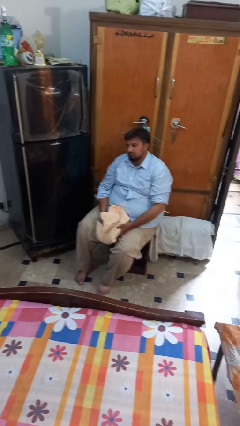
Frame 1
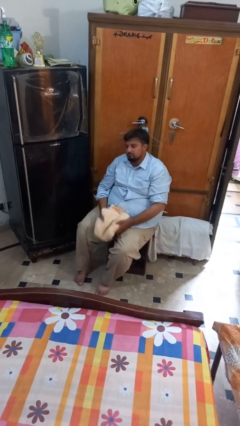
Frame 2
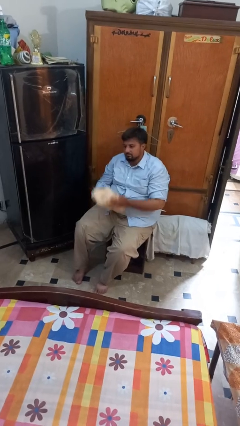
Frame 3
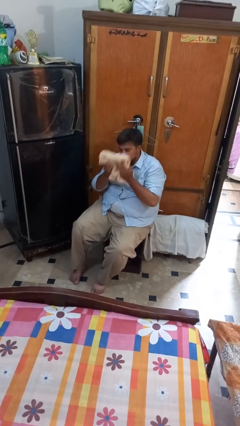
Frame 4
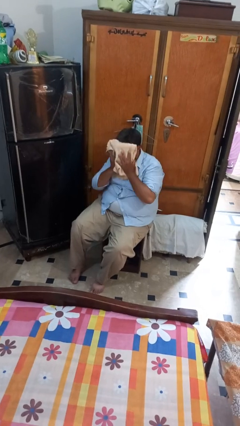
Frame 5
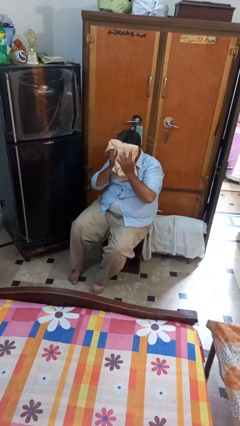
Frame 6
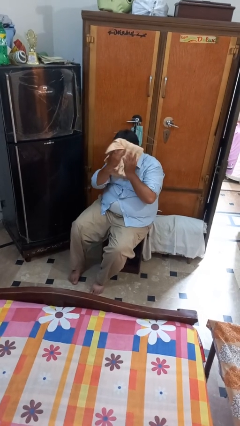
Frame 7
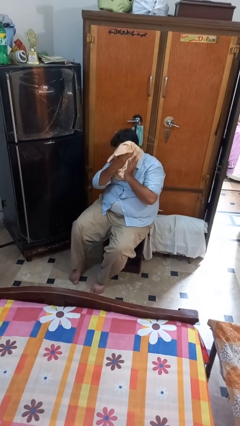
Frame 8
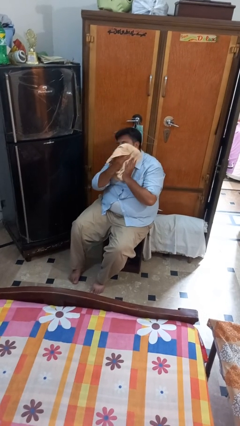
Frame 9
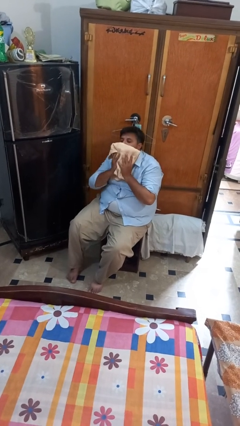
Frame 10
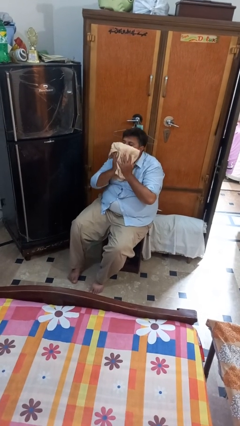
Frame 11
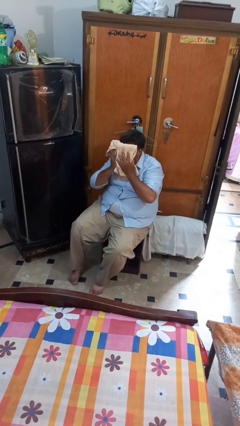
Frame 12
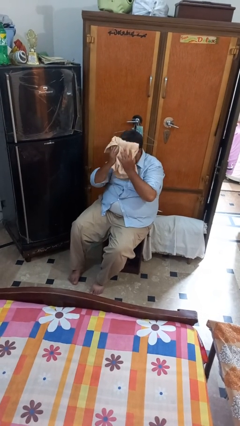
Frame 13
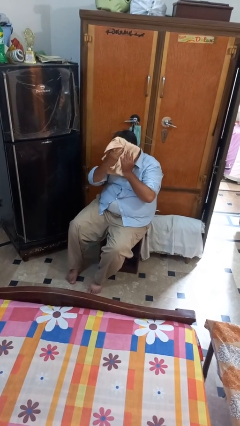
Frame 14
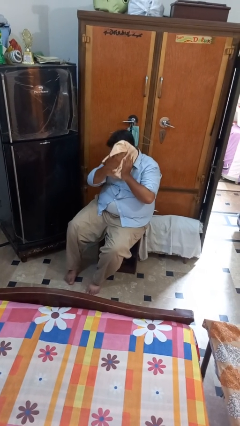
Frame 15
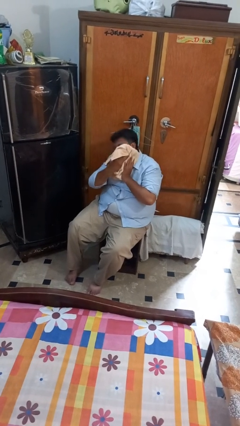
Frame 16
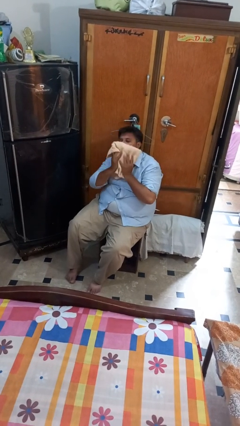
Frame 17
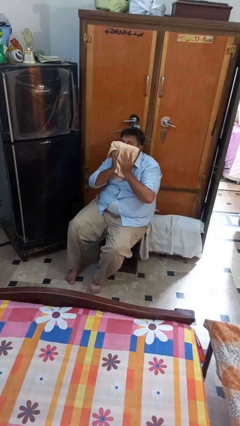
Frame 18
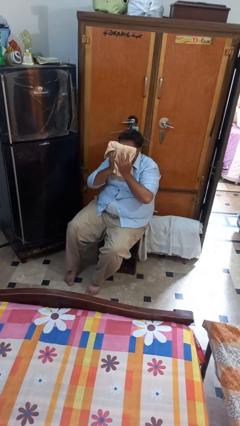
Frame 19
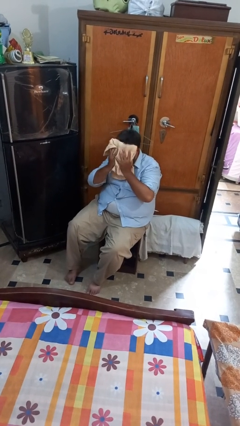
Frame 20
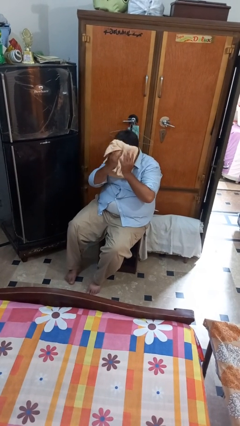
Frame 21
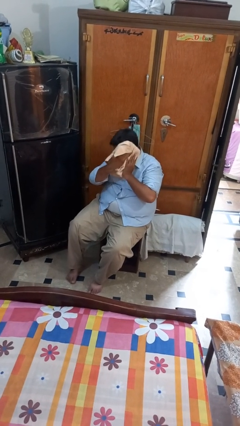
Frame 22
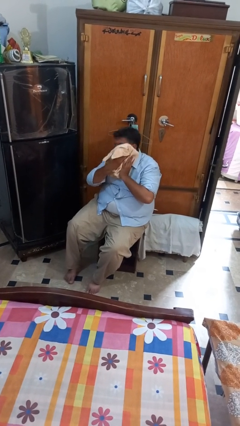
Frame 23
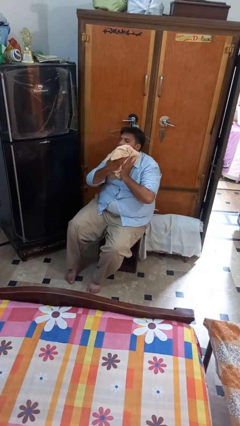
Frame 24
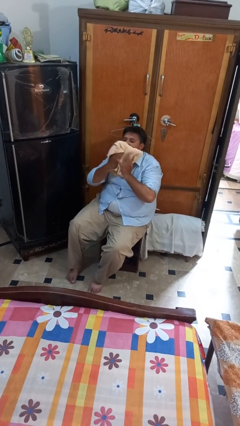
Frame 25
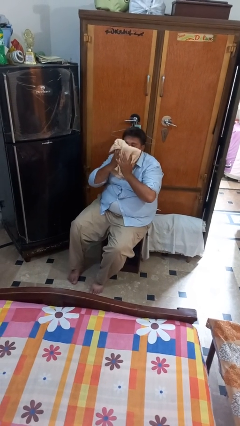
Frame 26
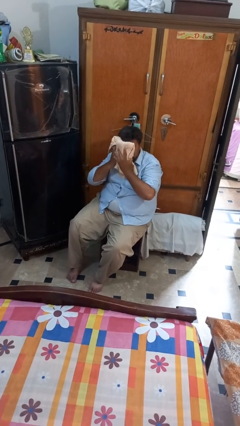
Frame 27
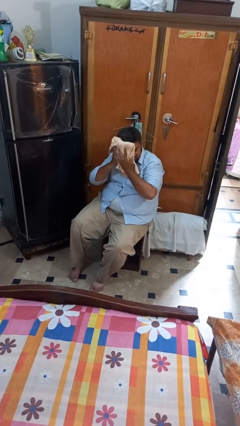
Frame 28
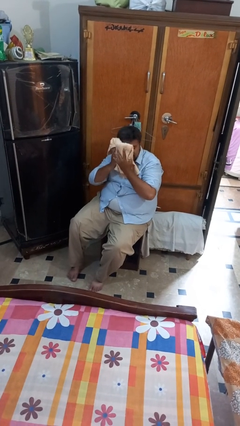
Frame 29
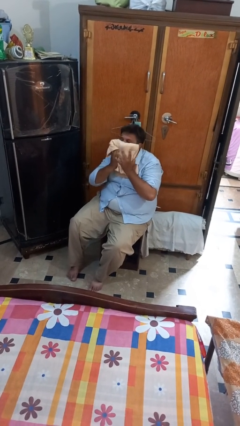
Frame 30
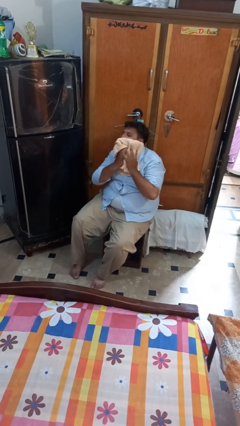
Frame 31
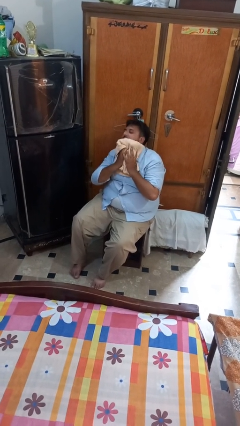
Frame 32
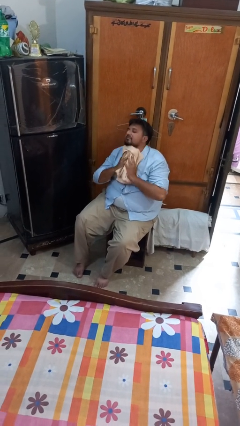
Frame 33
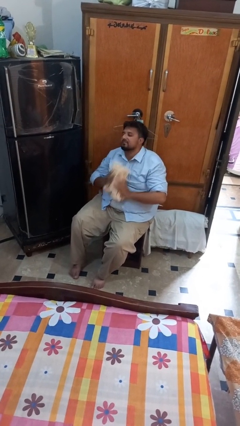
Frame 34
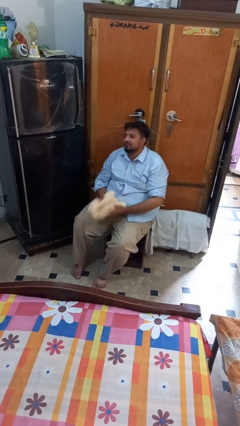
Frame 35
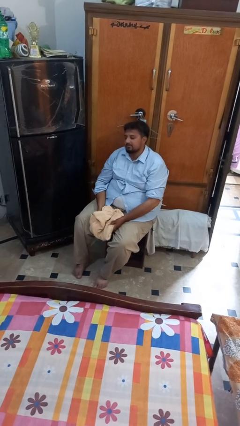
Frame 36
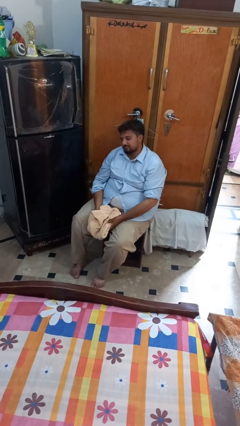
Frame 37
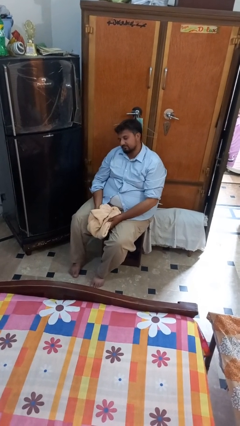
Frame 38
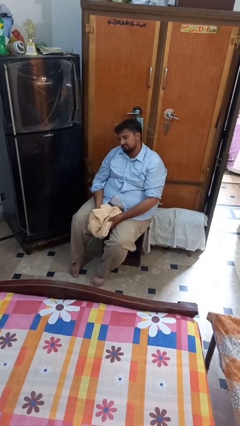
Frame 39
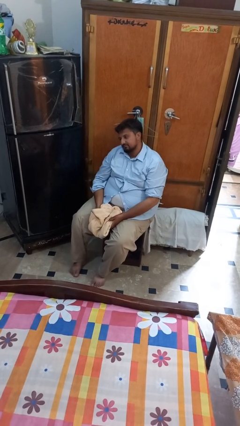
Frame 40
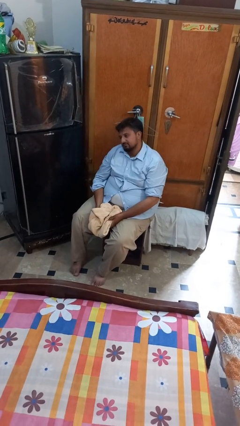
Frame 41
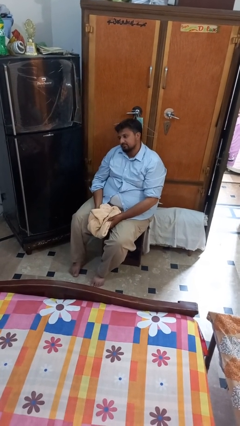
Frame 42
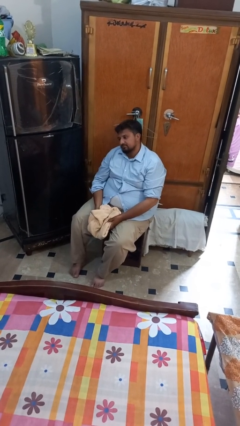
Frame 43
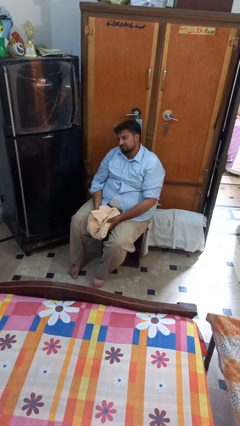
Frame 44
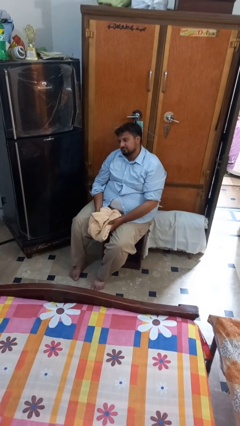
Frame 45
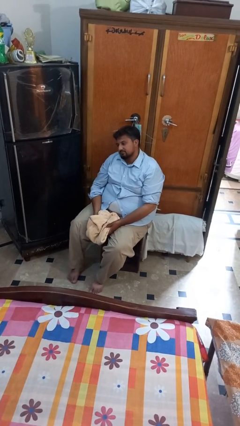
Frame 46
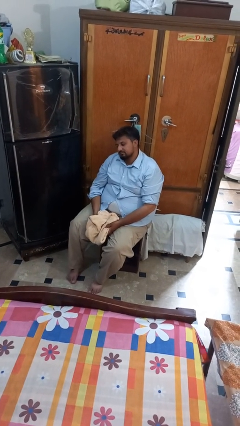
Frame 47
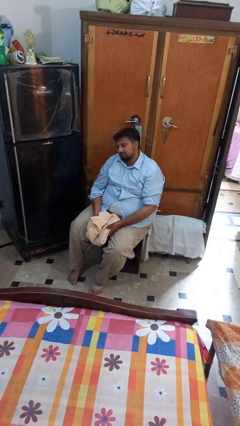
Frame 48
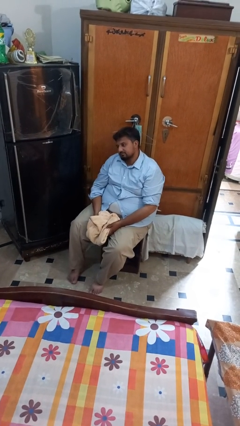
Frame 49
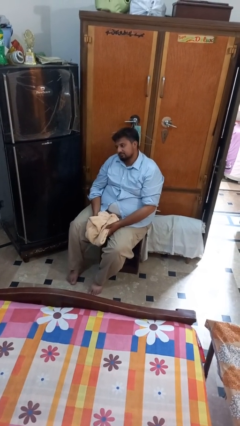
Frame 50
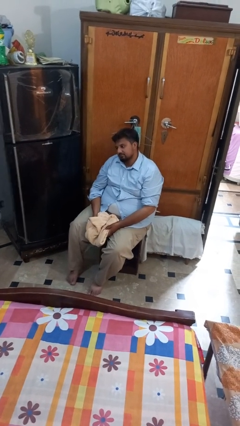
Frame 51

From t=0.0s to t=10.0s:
person wipes mouth with napkin

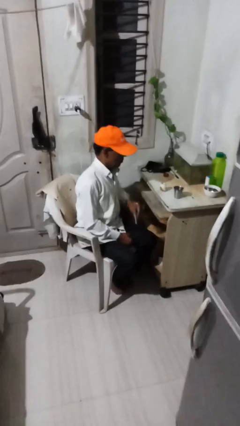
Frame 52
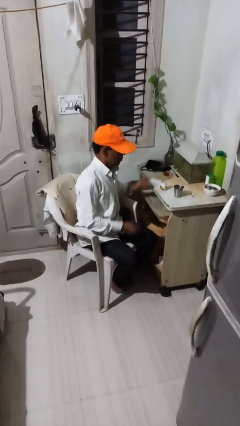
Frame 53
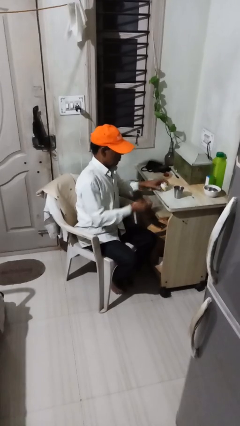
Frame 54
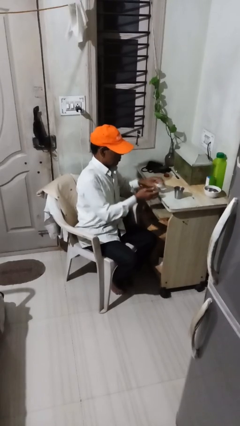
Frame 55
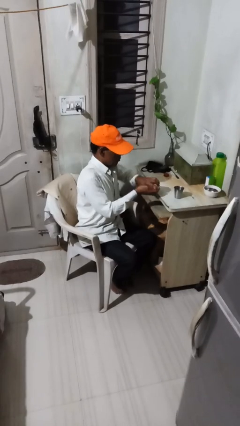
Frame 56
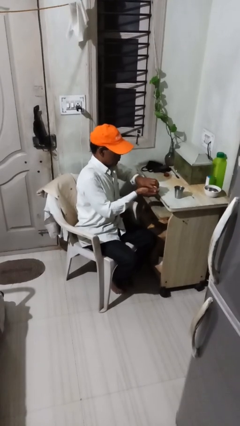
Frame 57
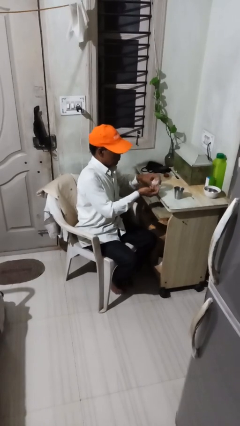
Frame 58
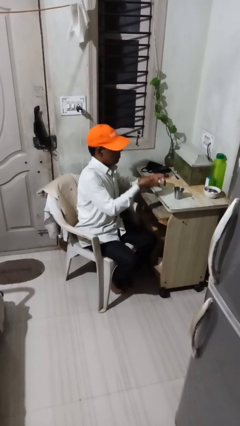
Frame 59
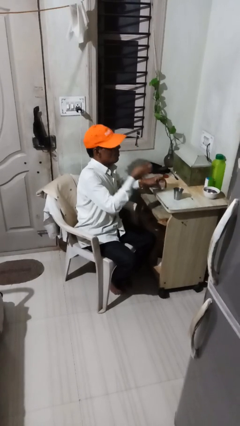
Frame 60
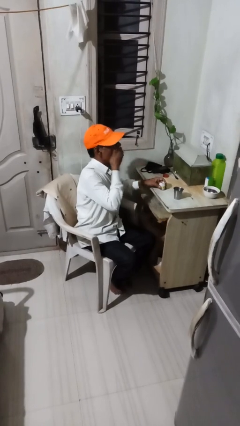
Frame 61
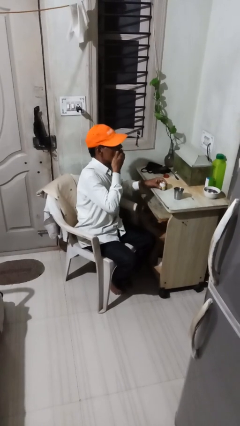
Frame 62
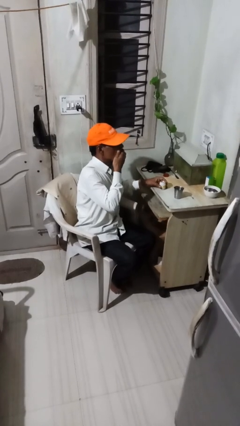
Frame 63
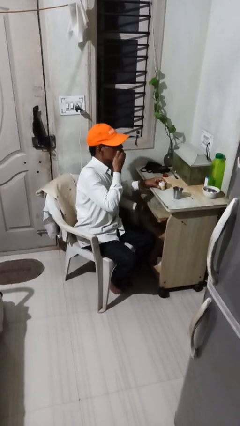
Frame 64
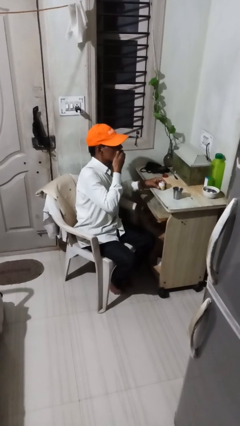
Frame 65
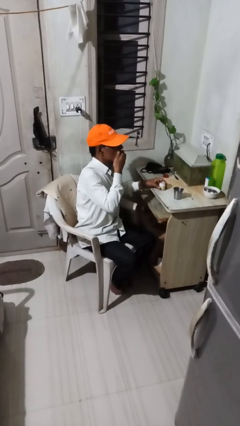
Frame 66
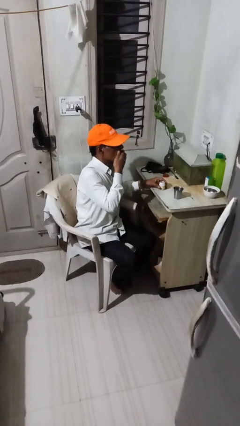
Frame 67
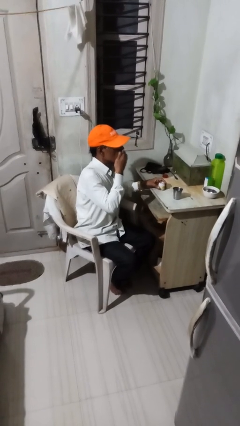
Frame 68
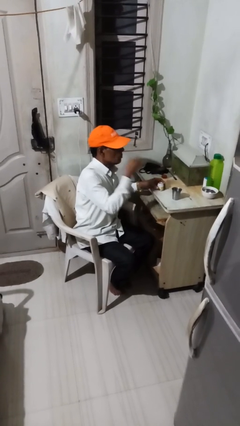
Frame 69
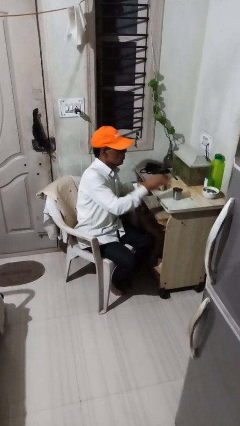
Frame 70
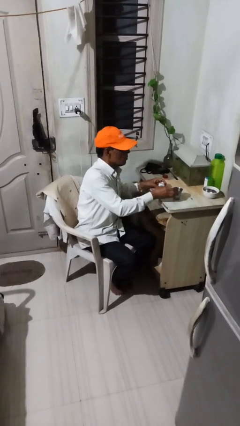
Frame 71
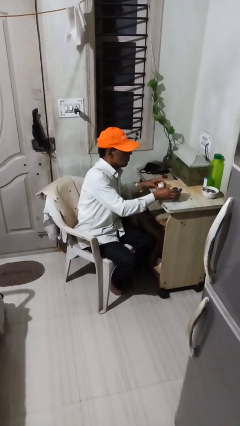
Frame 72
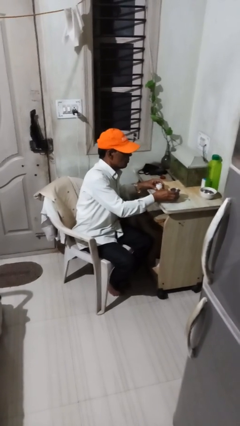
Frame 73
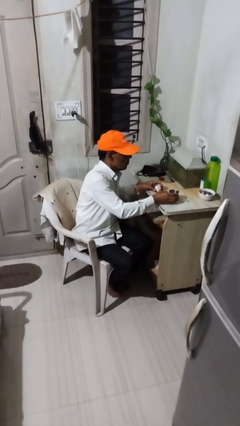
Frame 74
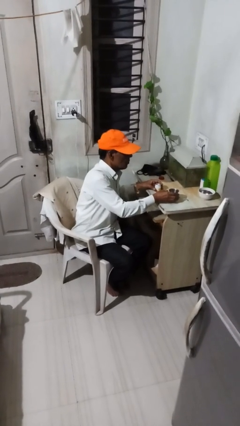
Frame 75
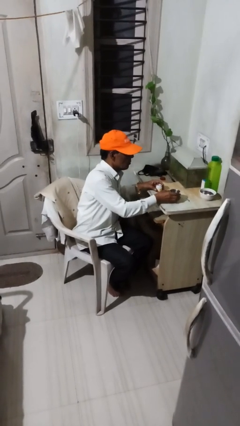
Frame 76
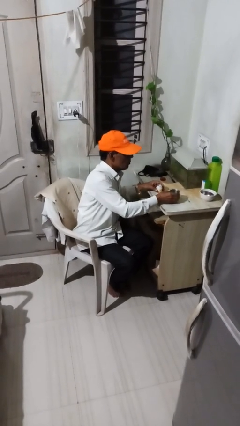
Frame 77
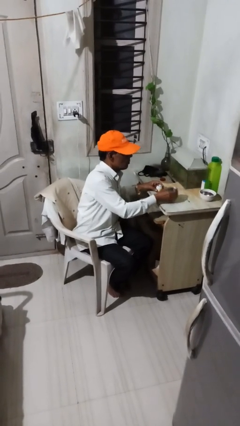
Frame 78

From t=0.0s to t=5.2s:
person folds socks

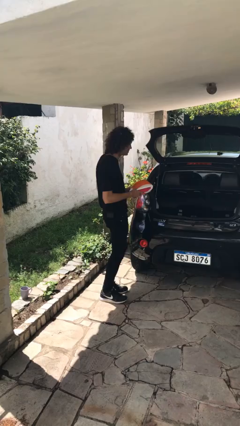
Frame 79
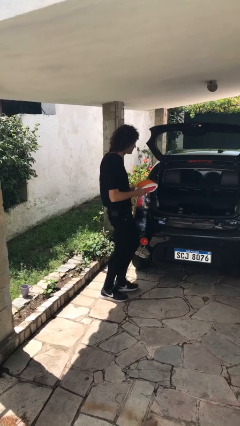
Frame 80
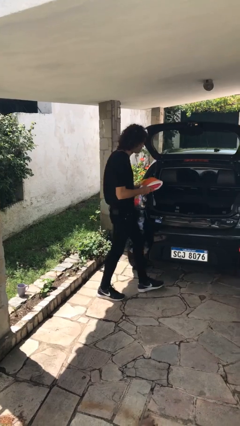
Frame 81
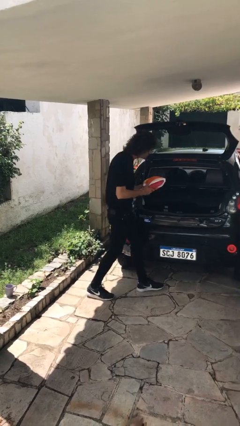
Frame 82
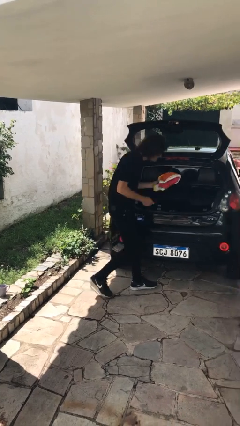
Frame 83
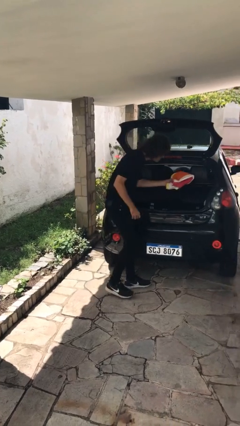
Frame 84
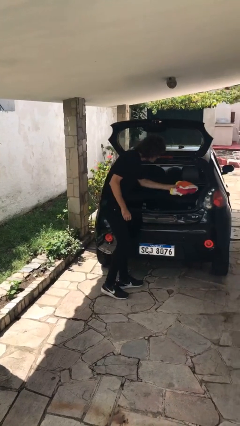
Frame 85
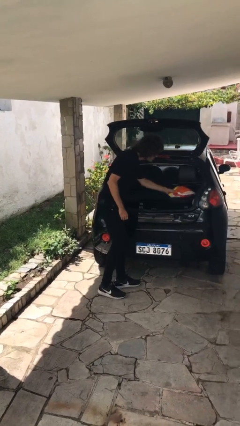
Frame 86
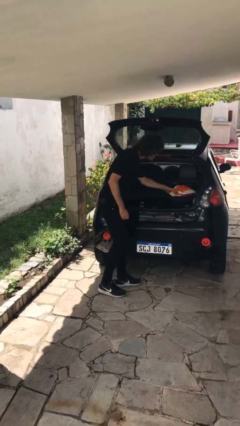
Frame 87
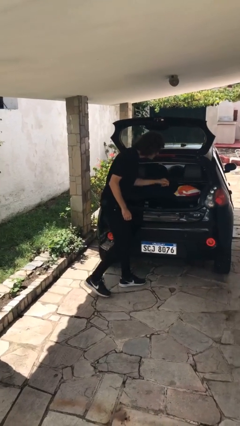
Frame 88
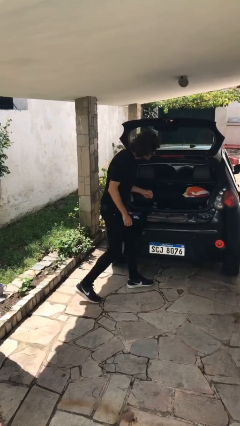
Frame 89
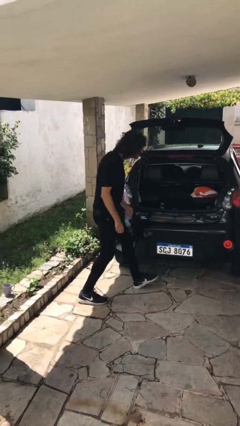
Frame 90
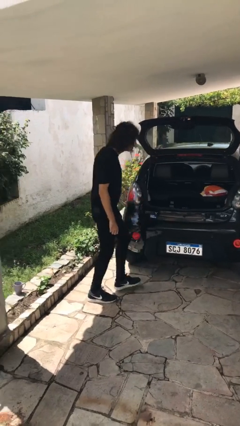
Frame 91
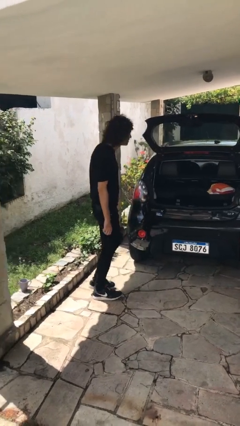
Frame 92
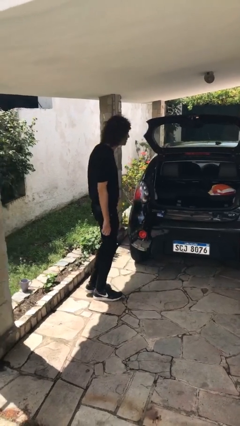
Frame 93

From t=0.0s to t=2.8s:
person loads car

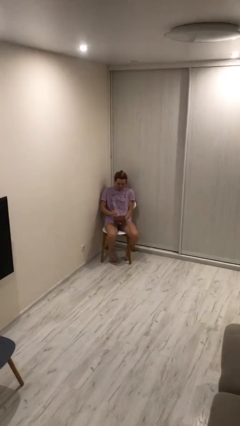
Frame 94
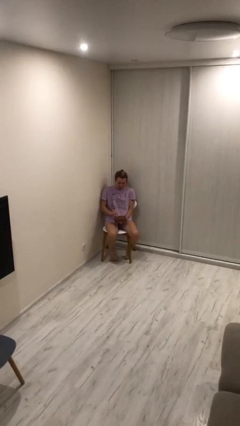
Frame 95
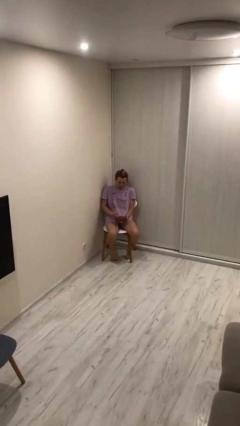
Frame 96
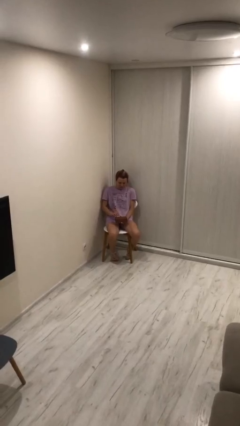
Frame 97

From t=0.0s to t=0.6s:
person closes jewelry box
